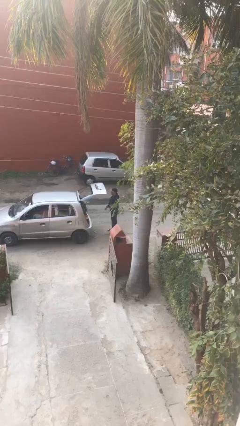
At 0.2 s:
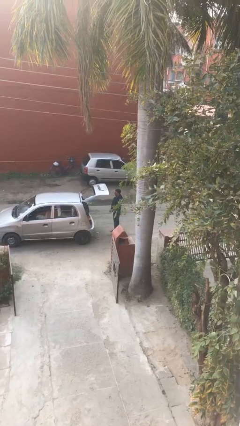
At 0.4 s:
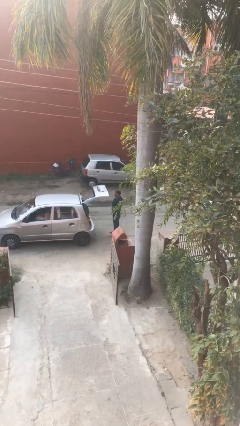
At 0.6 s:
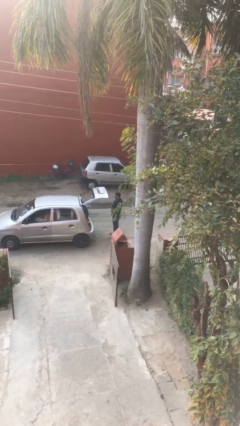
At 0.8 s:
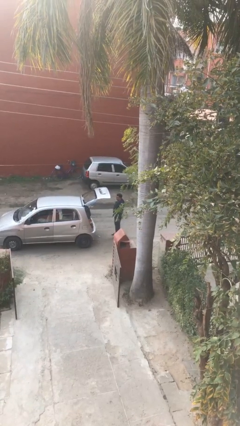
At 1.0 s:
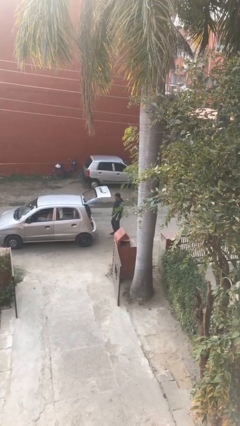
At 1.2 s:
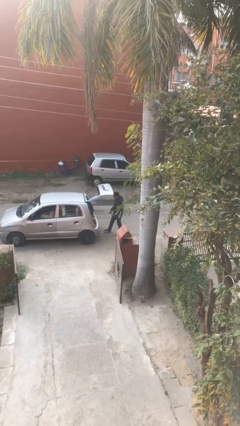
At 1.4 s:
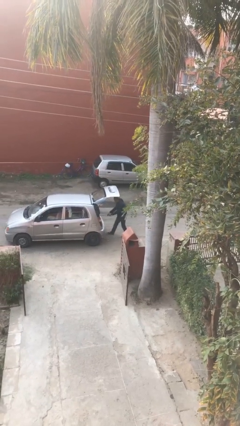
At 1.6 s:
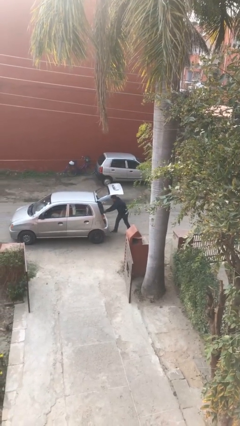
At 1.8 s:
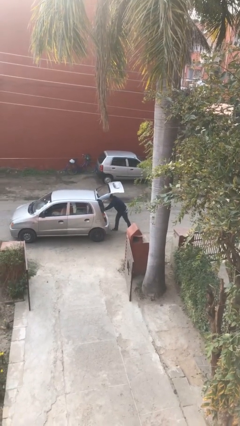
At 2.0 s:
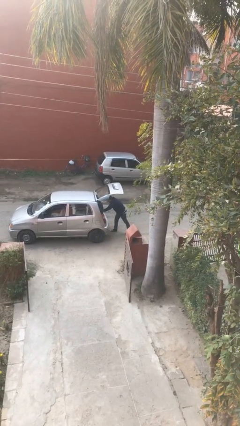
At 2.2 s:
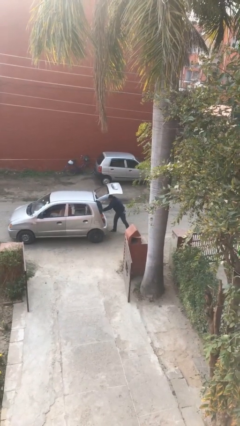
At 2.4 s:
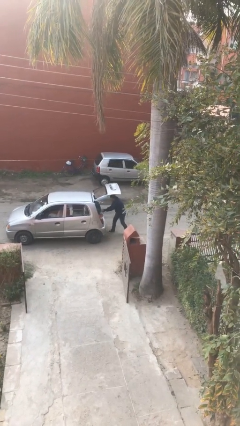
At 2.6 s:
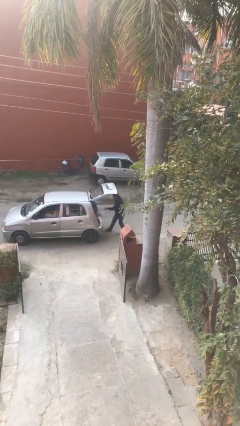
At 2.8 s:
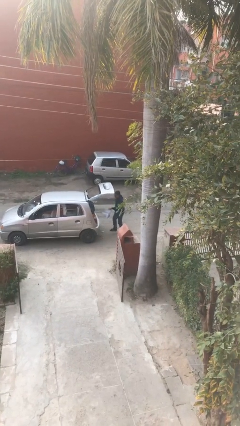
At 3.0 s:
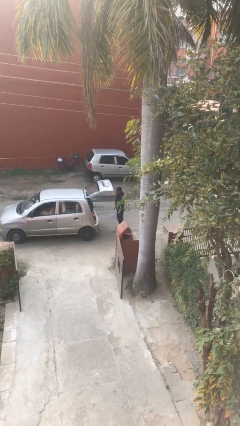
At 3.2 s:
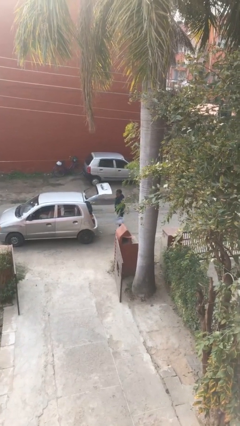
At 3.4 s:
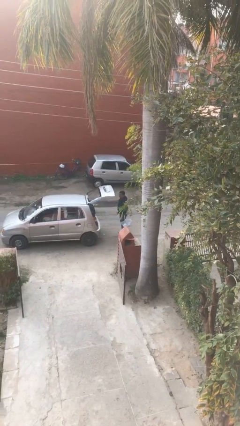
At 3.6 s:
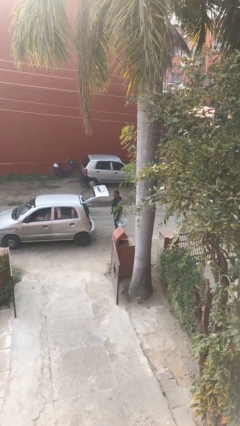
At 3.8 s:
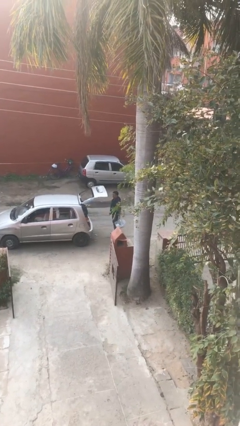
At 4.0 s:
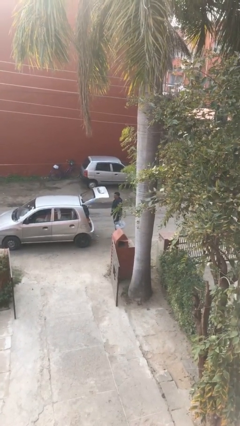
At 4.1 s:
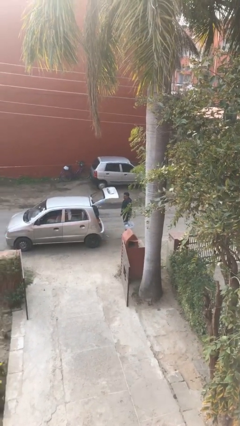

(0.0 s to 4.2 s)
person unloads car

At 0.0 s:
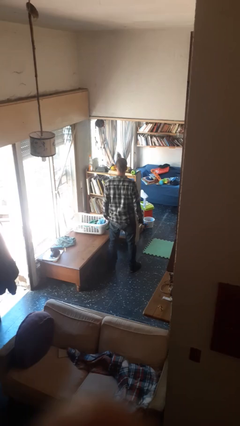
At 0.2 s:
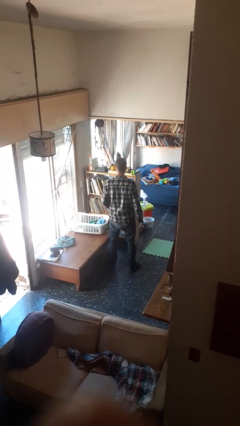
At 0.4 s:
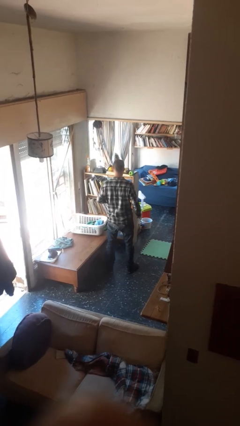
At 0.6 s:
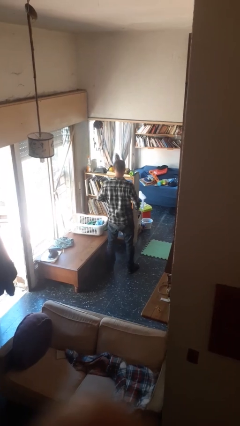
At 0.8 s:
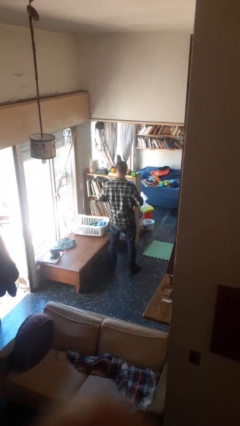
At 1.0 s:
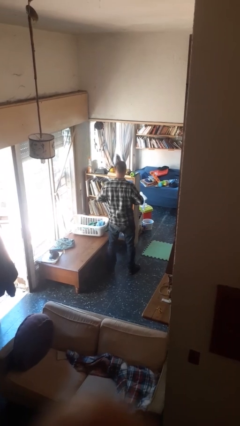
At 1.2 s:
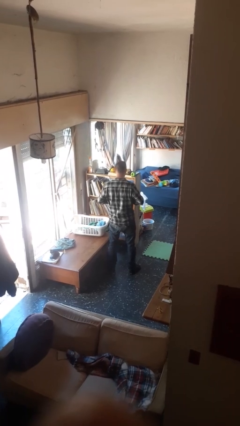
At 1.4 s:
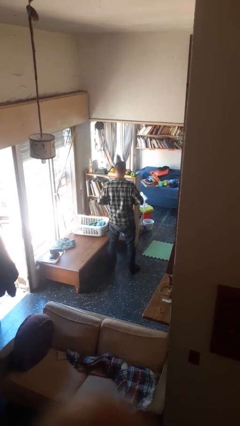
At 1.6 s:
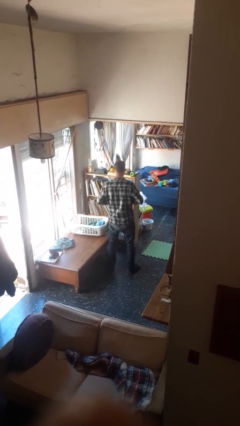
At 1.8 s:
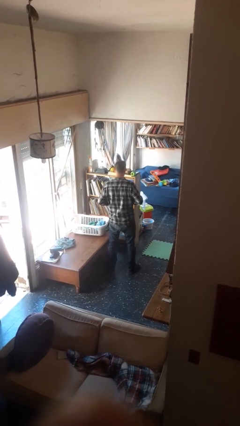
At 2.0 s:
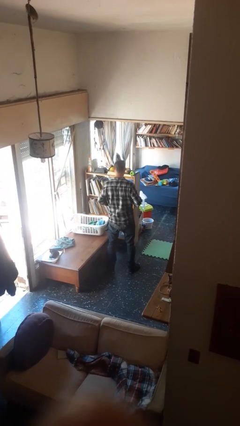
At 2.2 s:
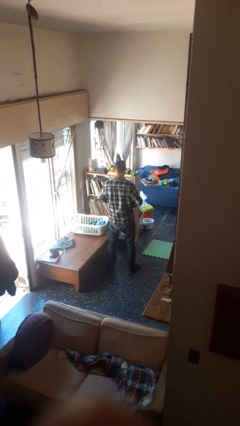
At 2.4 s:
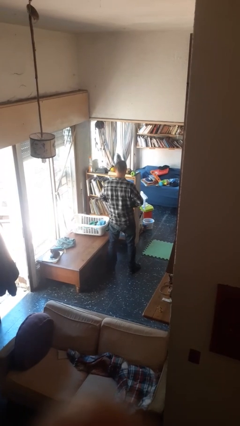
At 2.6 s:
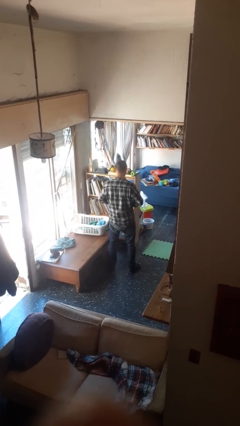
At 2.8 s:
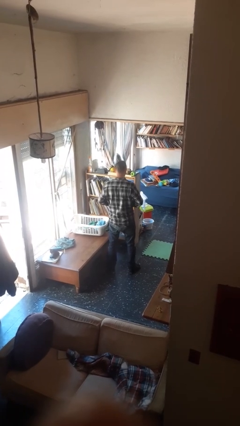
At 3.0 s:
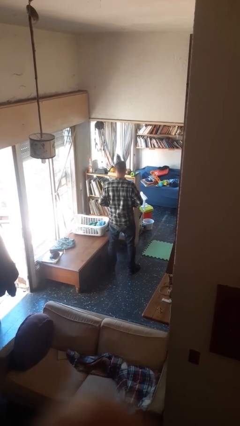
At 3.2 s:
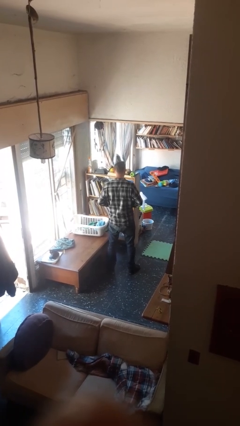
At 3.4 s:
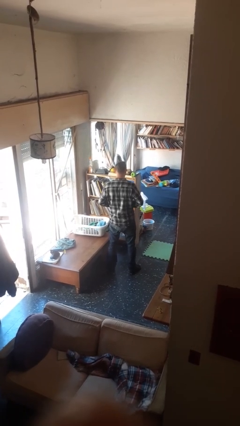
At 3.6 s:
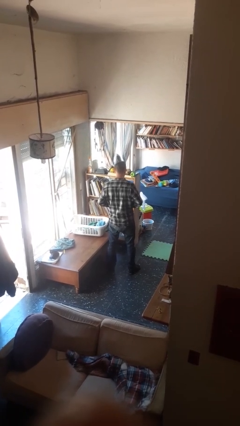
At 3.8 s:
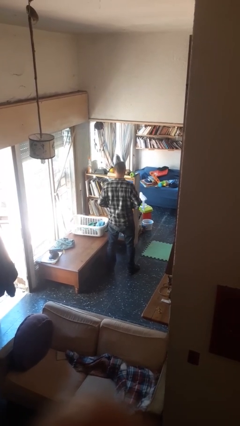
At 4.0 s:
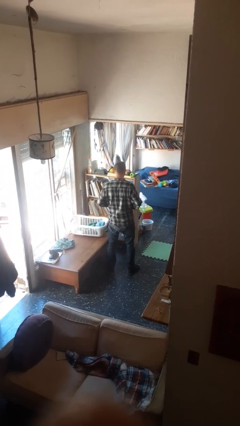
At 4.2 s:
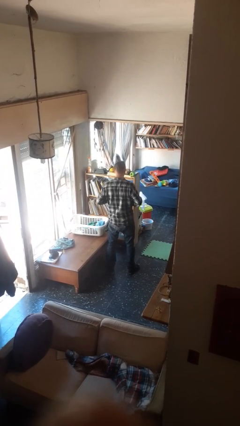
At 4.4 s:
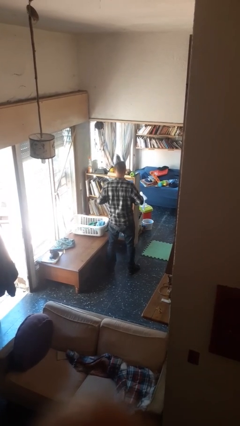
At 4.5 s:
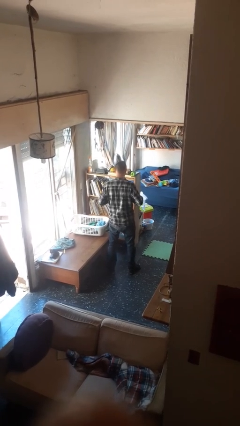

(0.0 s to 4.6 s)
person unbuttons shirt

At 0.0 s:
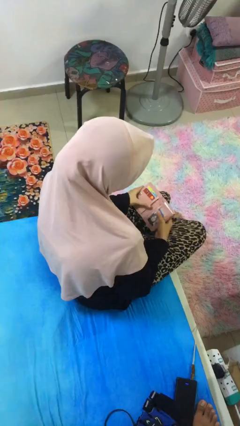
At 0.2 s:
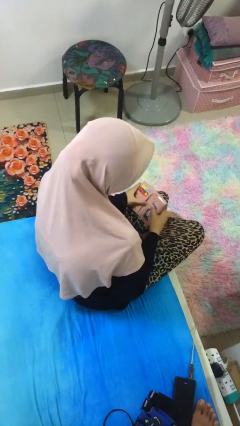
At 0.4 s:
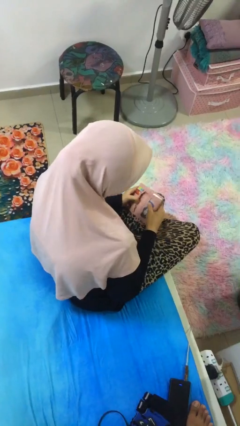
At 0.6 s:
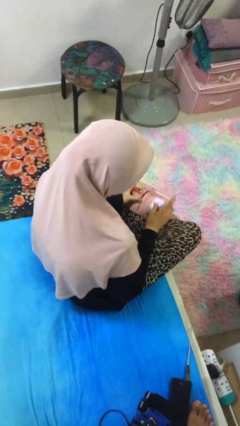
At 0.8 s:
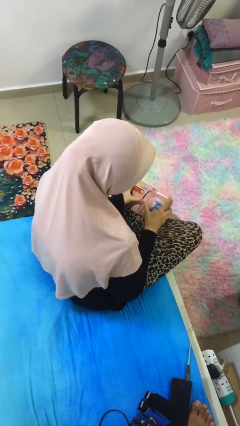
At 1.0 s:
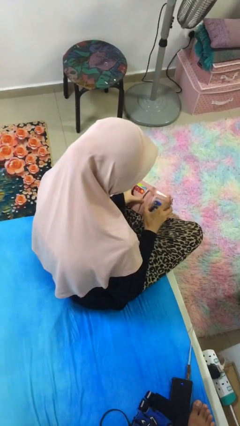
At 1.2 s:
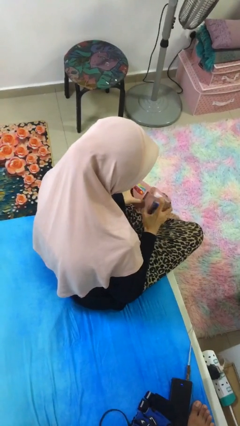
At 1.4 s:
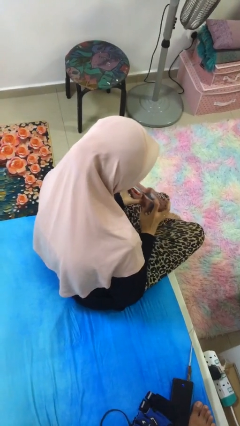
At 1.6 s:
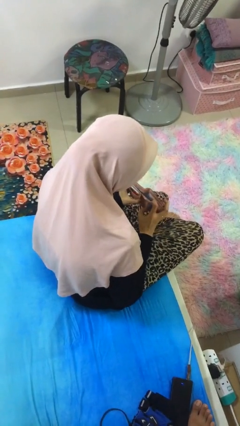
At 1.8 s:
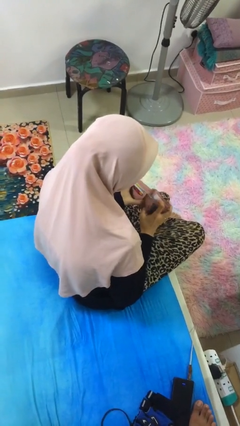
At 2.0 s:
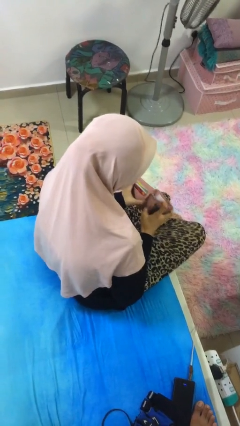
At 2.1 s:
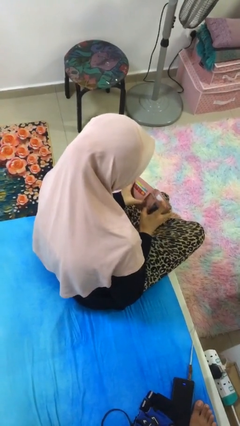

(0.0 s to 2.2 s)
person searches in purse

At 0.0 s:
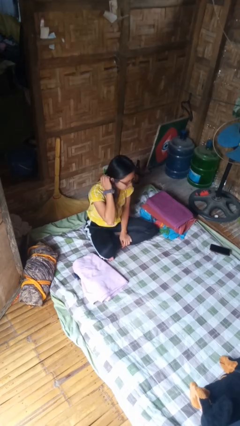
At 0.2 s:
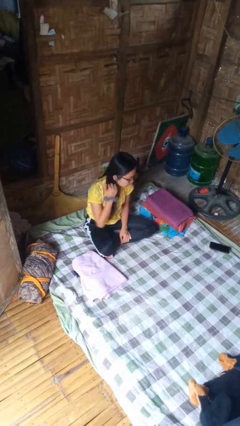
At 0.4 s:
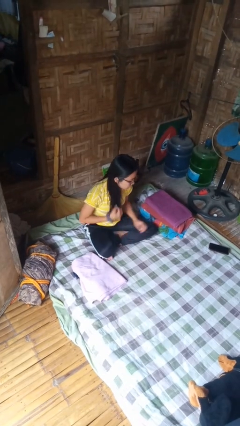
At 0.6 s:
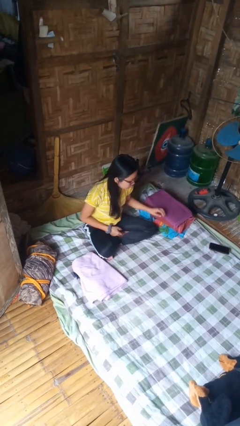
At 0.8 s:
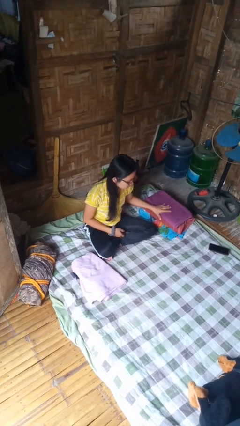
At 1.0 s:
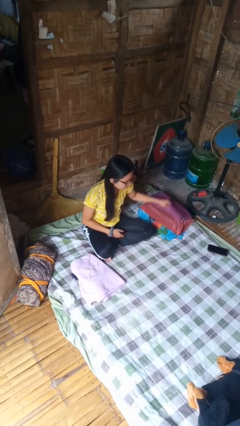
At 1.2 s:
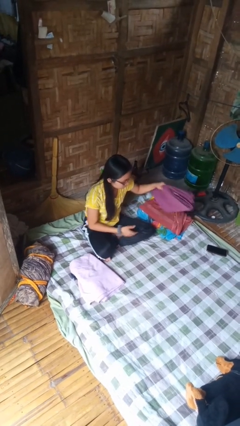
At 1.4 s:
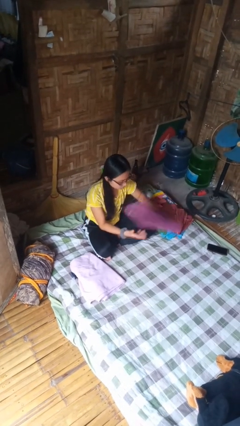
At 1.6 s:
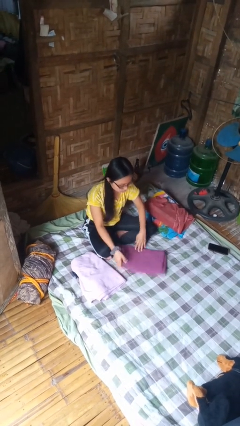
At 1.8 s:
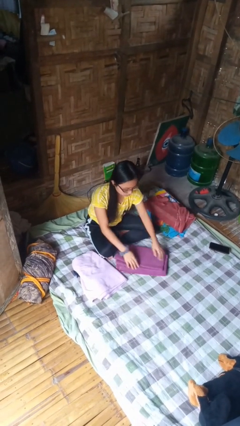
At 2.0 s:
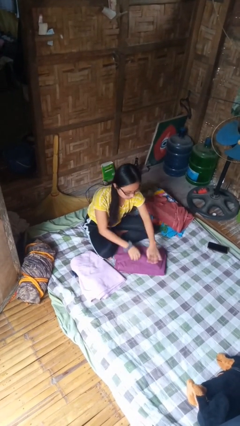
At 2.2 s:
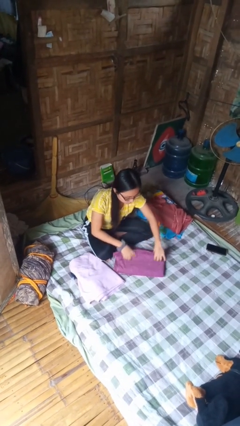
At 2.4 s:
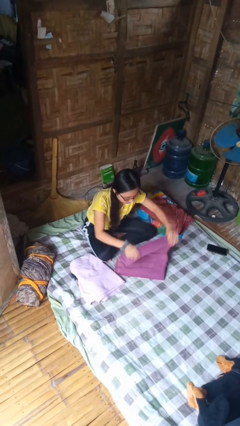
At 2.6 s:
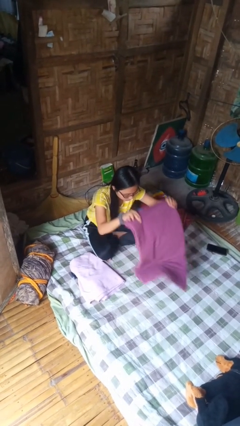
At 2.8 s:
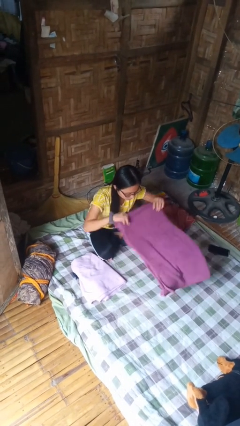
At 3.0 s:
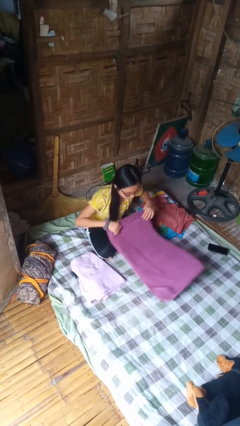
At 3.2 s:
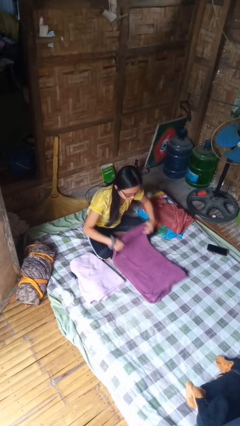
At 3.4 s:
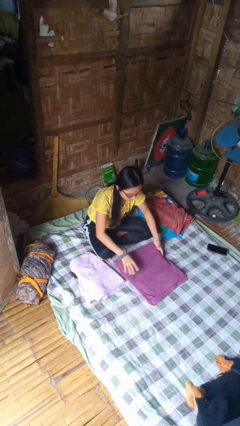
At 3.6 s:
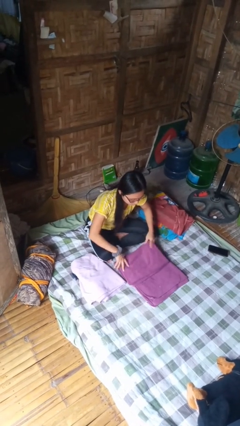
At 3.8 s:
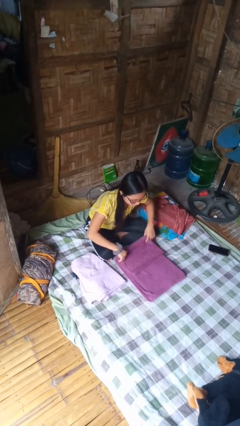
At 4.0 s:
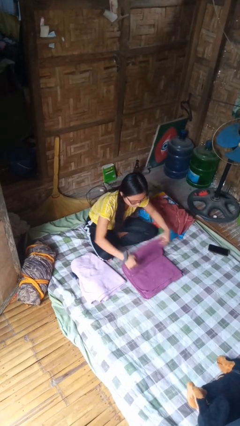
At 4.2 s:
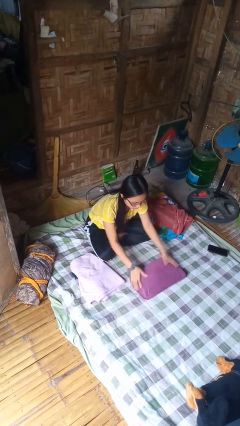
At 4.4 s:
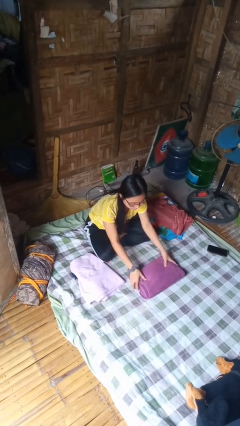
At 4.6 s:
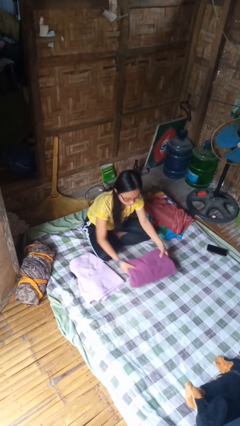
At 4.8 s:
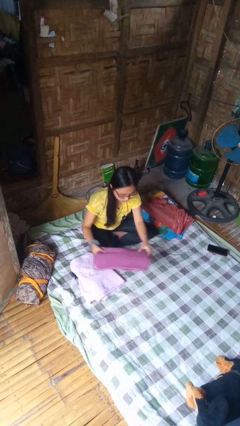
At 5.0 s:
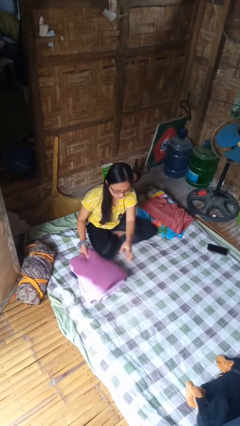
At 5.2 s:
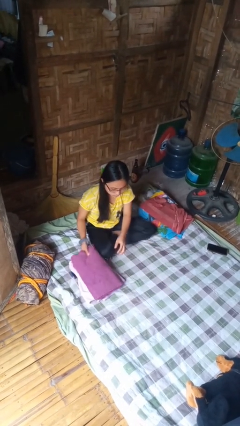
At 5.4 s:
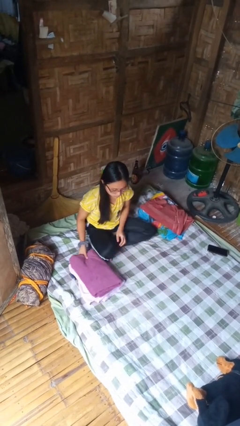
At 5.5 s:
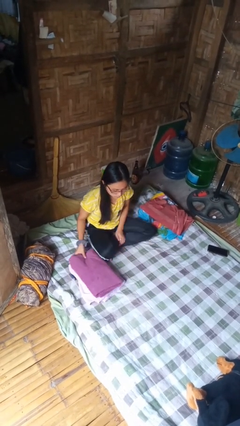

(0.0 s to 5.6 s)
person folds towel

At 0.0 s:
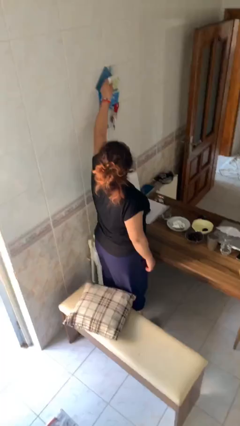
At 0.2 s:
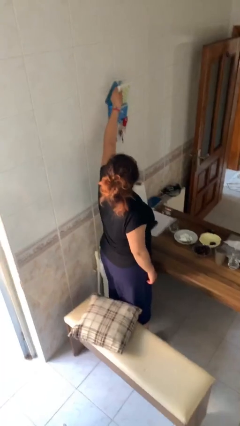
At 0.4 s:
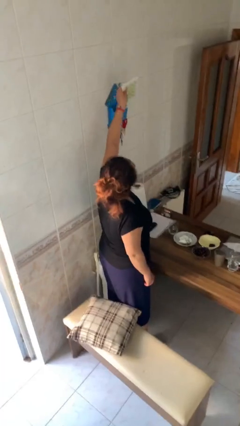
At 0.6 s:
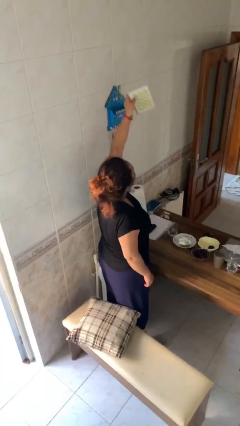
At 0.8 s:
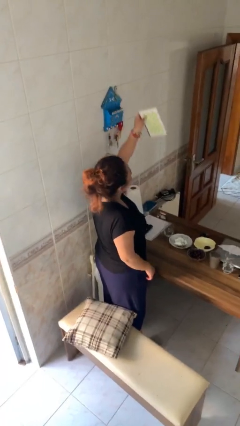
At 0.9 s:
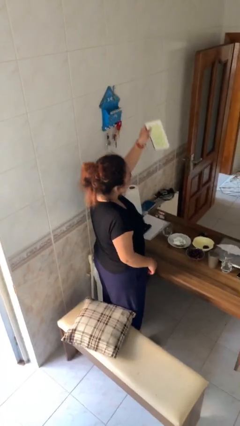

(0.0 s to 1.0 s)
person picks up object from shelf

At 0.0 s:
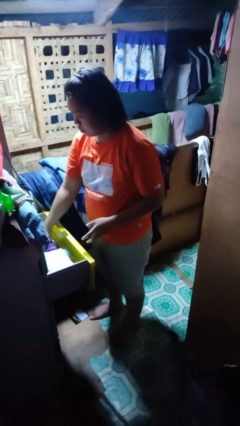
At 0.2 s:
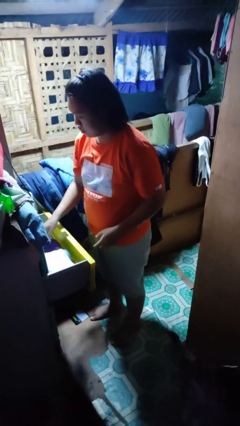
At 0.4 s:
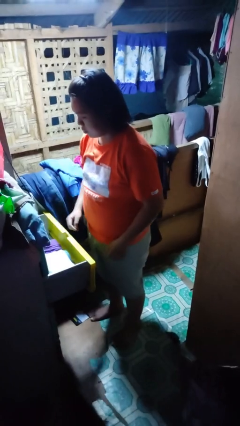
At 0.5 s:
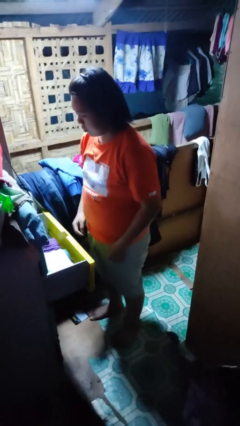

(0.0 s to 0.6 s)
person puts clothes into dresser
